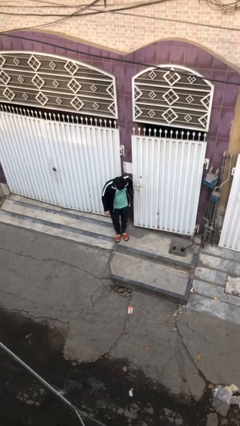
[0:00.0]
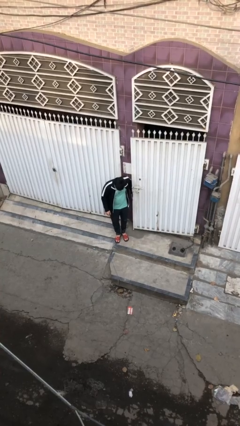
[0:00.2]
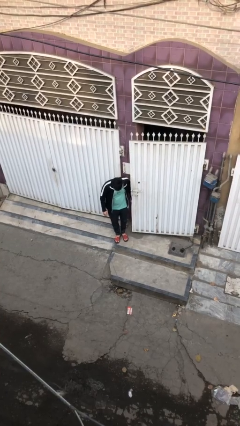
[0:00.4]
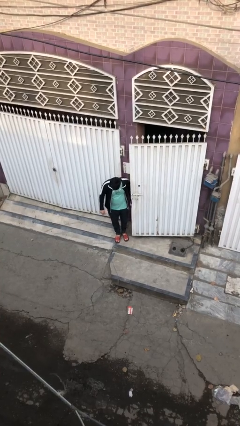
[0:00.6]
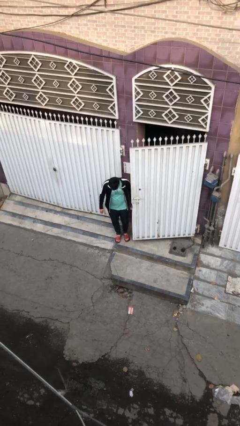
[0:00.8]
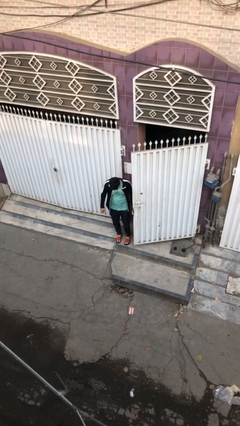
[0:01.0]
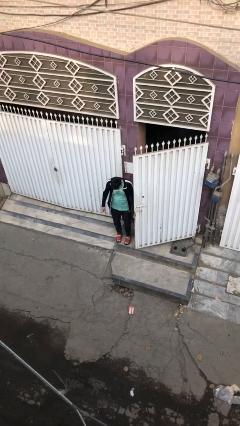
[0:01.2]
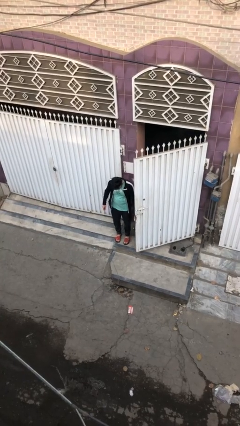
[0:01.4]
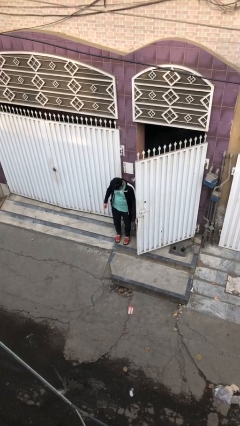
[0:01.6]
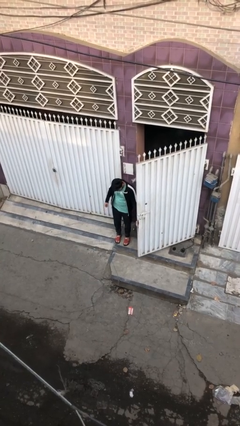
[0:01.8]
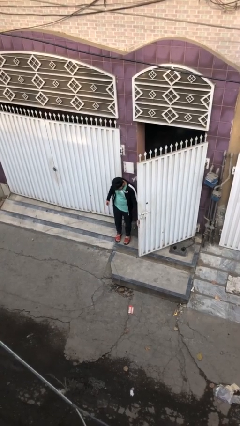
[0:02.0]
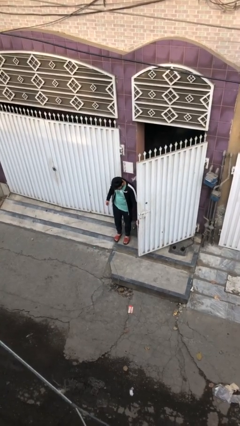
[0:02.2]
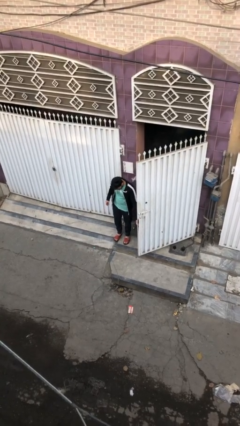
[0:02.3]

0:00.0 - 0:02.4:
person opens facility door

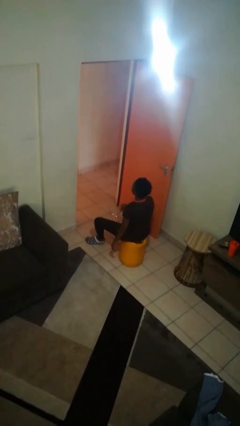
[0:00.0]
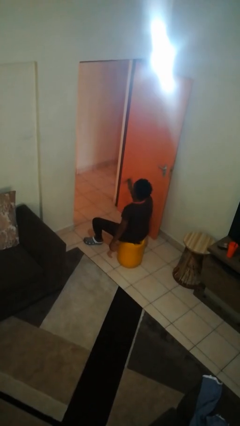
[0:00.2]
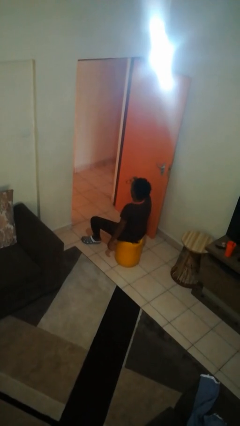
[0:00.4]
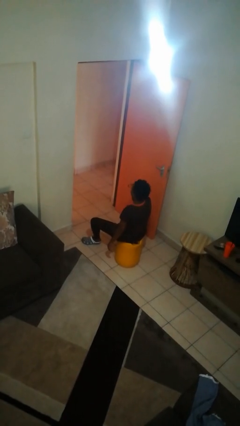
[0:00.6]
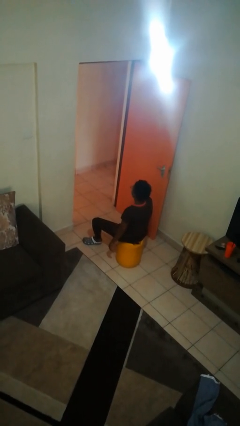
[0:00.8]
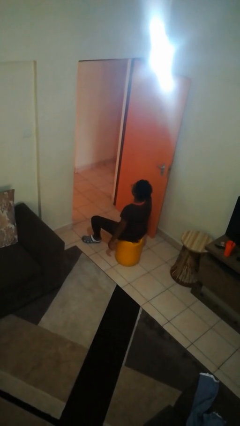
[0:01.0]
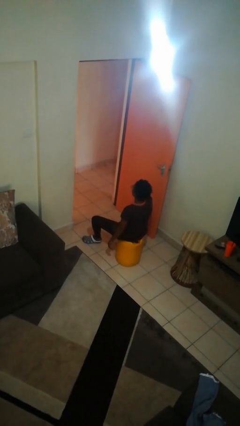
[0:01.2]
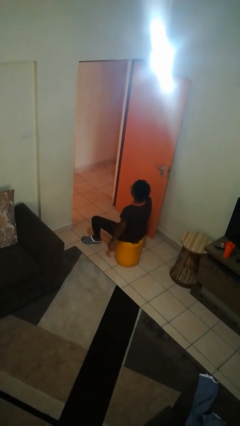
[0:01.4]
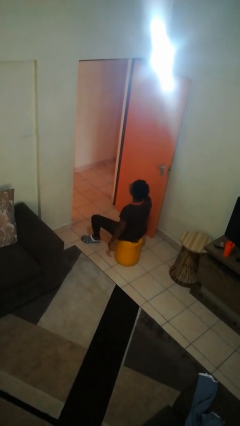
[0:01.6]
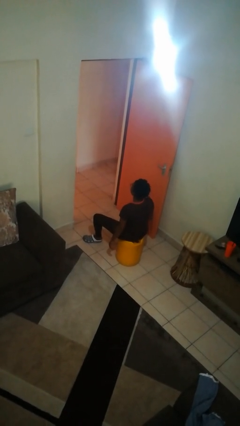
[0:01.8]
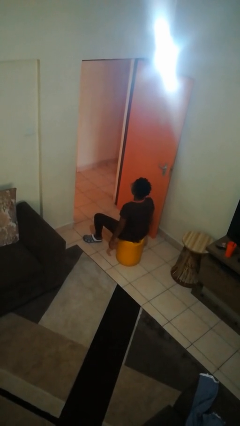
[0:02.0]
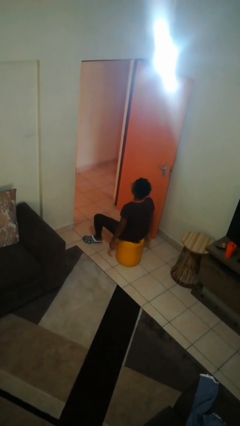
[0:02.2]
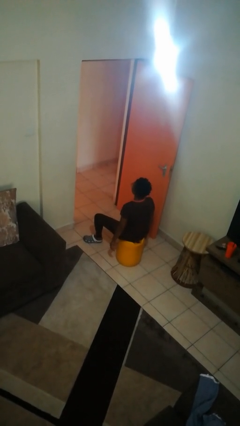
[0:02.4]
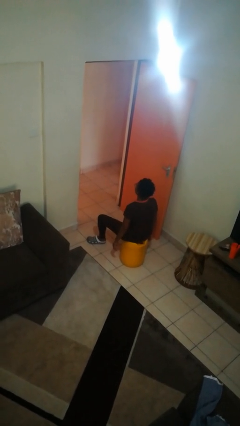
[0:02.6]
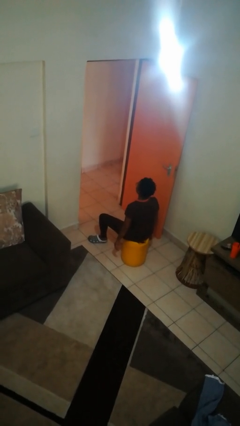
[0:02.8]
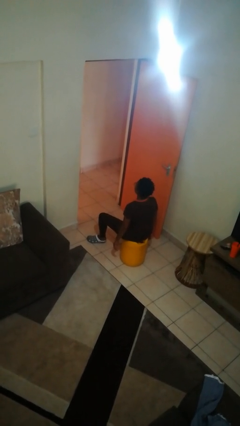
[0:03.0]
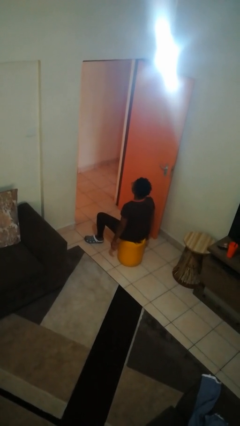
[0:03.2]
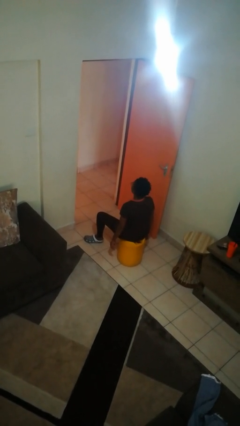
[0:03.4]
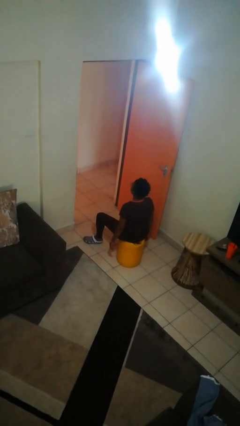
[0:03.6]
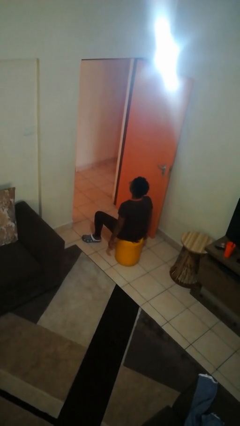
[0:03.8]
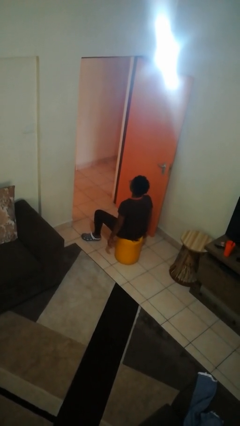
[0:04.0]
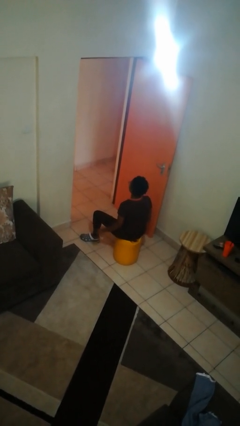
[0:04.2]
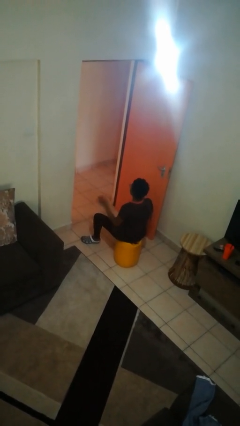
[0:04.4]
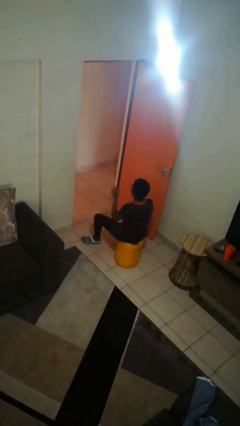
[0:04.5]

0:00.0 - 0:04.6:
person puts on glasses

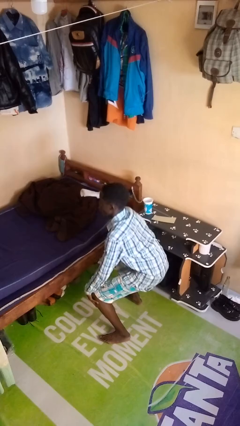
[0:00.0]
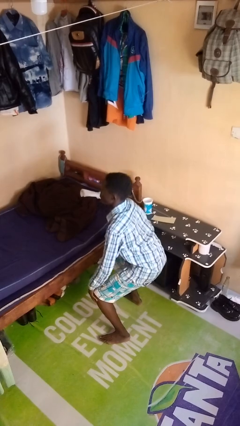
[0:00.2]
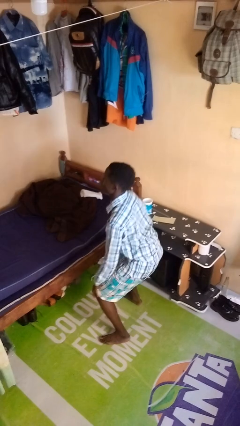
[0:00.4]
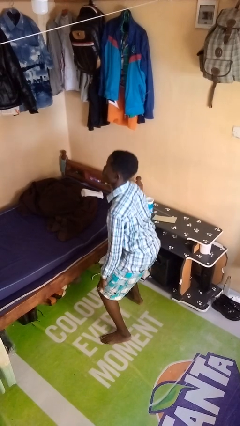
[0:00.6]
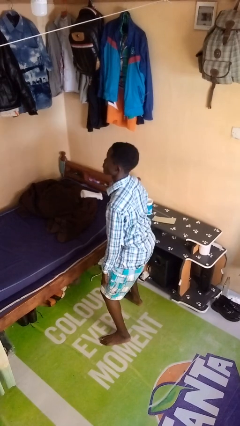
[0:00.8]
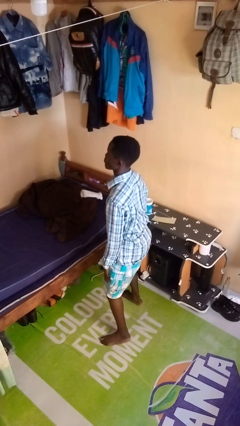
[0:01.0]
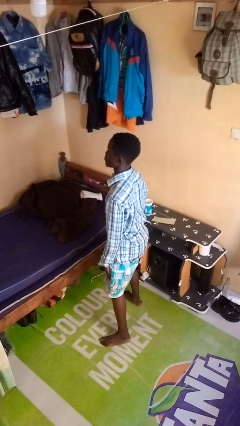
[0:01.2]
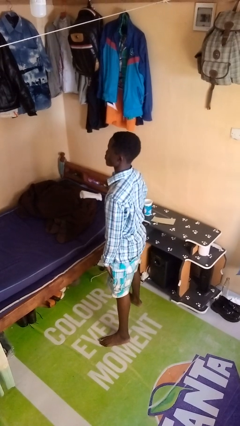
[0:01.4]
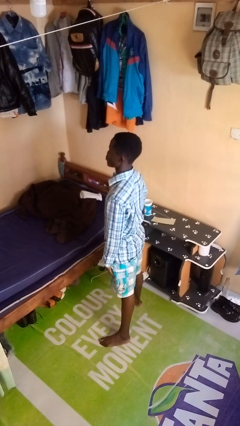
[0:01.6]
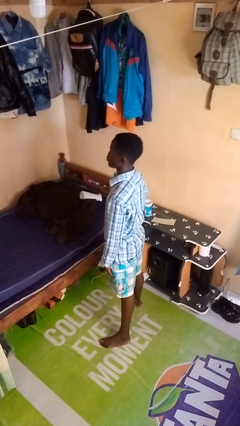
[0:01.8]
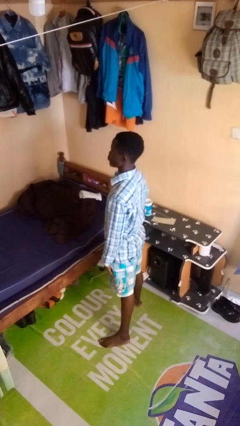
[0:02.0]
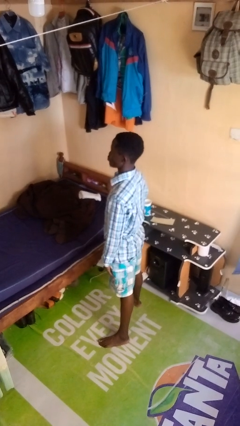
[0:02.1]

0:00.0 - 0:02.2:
person stands up

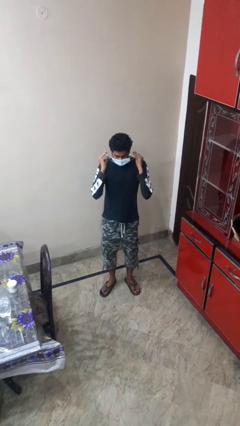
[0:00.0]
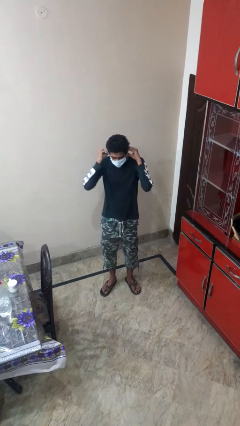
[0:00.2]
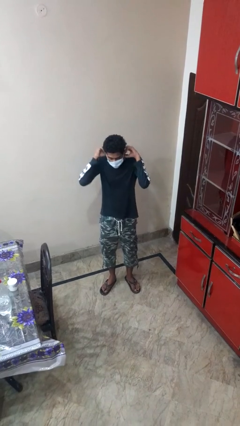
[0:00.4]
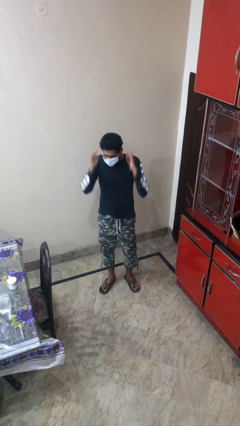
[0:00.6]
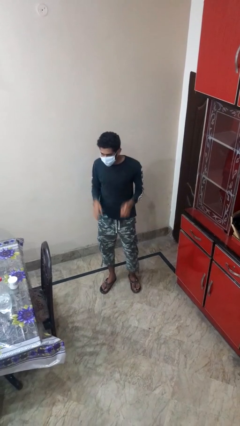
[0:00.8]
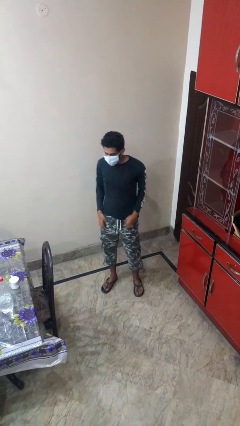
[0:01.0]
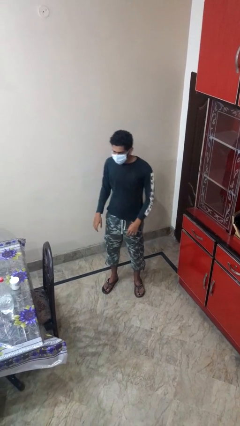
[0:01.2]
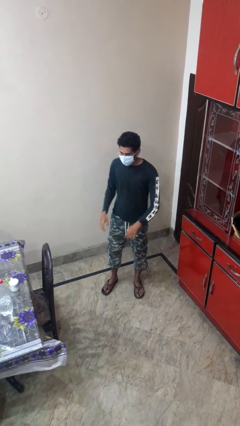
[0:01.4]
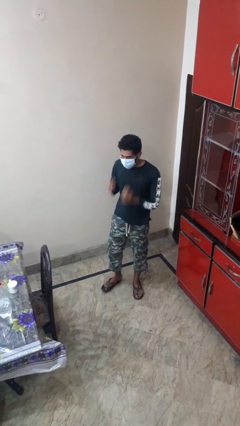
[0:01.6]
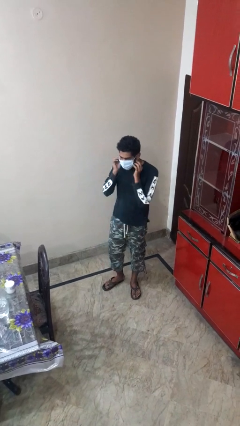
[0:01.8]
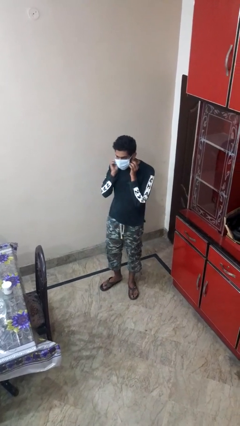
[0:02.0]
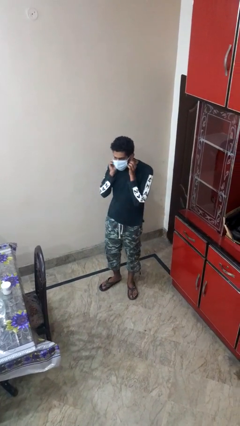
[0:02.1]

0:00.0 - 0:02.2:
person puts on facemask

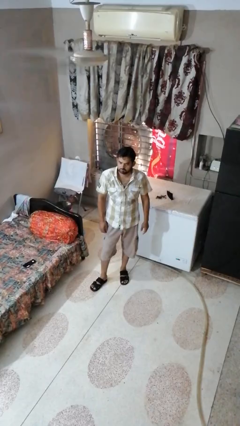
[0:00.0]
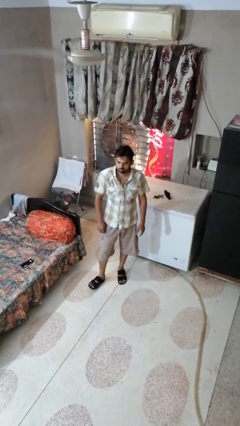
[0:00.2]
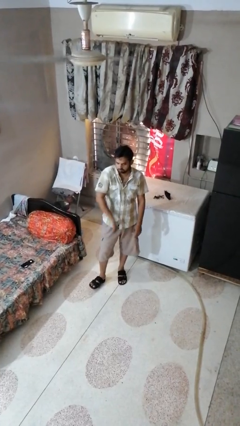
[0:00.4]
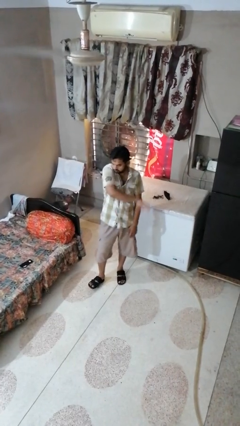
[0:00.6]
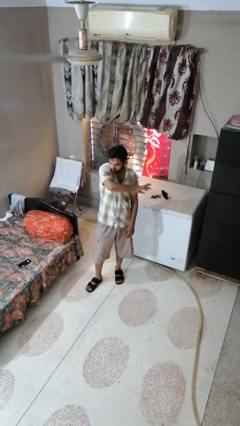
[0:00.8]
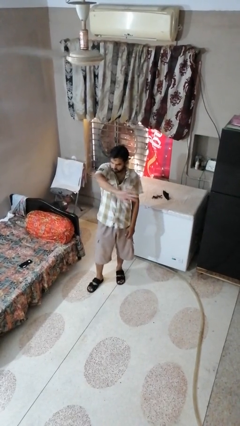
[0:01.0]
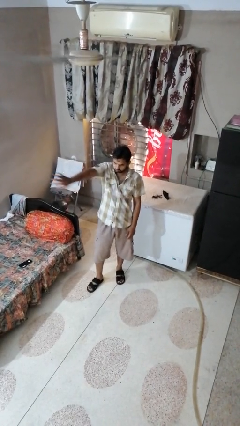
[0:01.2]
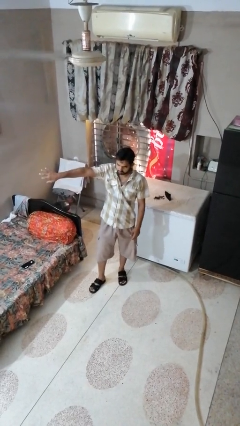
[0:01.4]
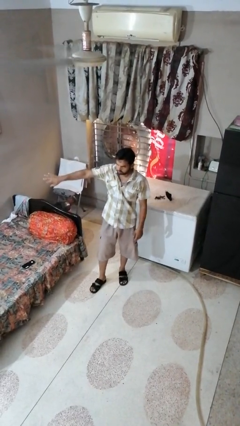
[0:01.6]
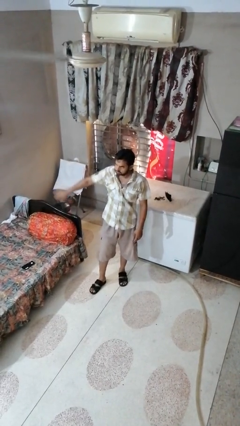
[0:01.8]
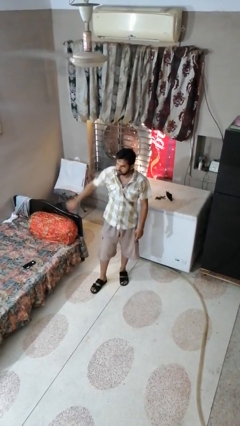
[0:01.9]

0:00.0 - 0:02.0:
person gestures swipe right

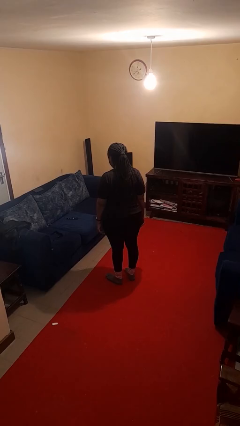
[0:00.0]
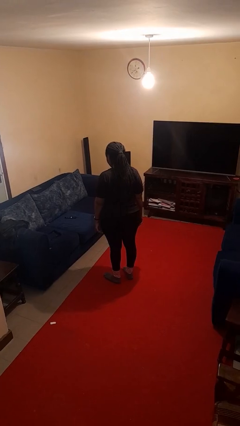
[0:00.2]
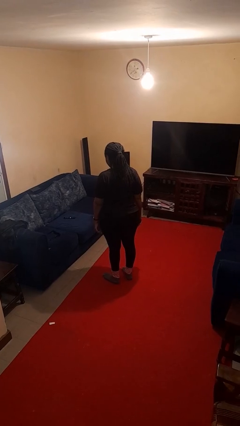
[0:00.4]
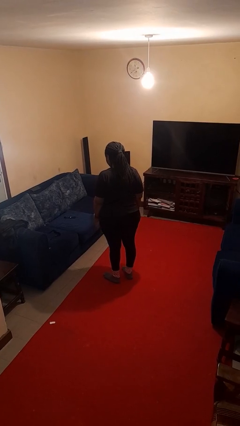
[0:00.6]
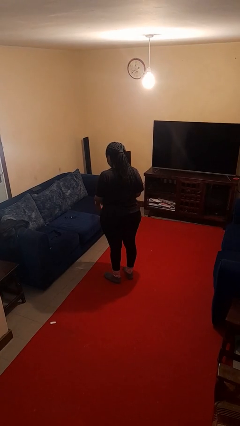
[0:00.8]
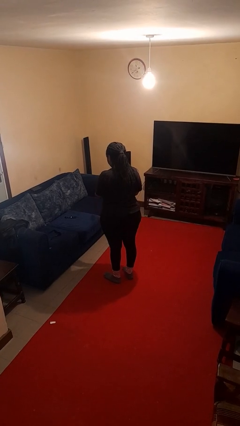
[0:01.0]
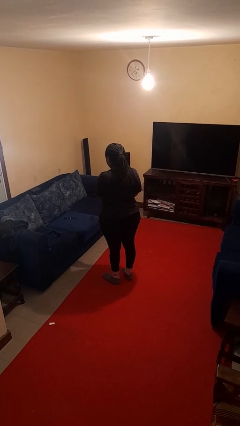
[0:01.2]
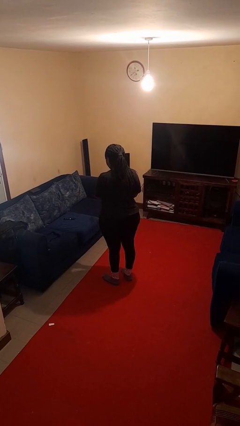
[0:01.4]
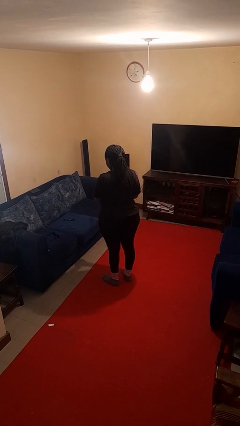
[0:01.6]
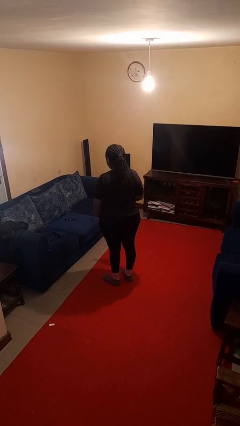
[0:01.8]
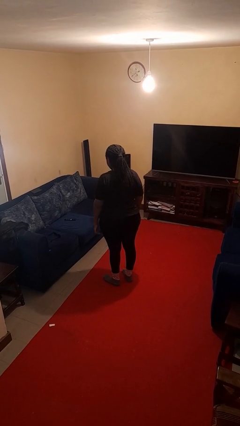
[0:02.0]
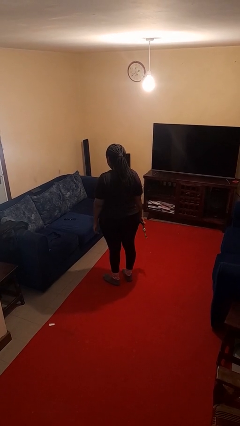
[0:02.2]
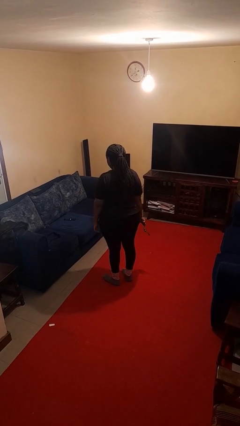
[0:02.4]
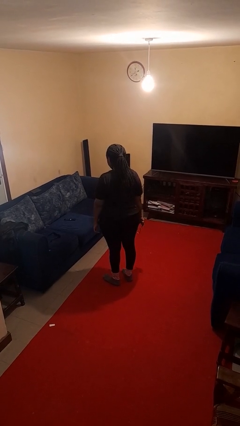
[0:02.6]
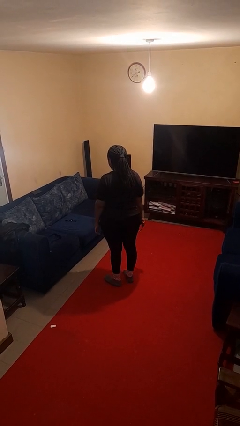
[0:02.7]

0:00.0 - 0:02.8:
person takes off wristwatch

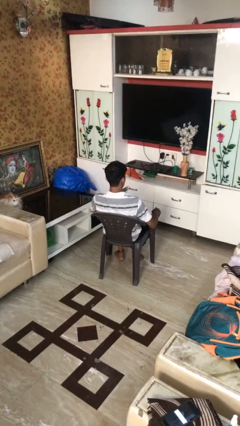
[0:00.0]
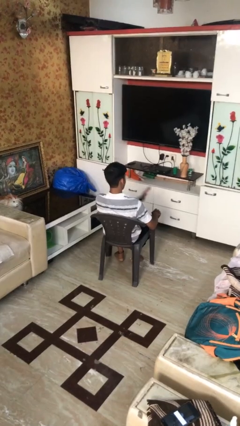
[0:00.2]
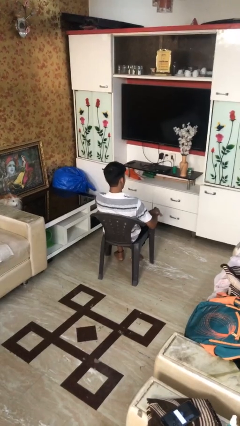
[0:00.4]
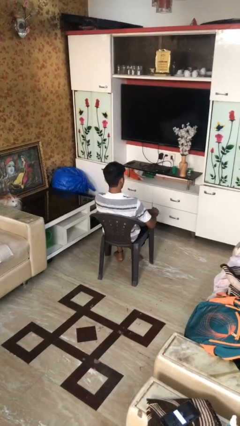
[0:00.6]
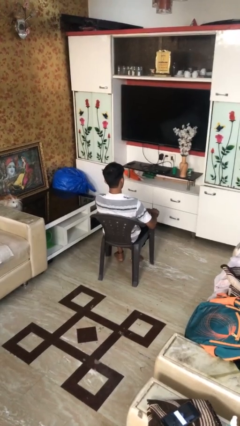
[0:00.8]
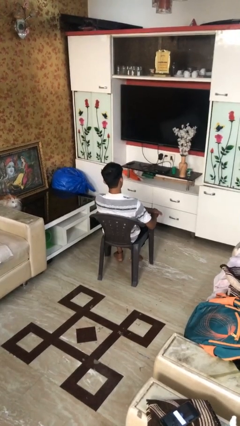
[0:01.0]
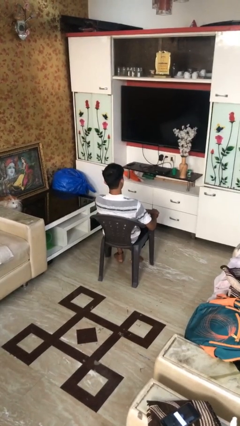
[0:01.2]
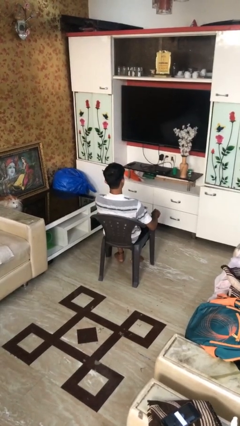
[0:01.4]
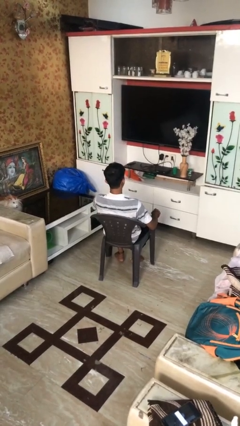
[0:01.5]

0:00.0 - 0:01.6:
person swats bug
